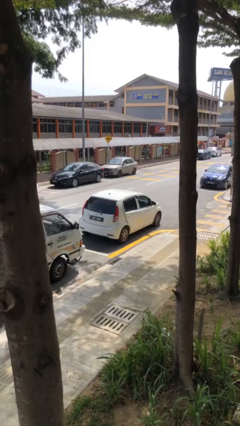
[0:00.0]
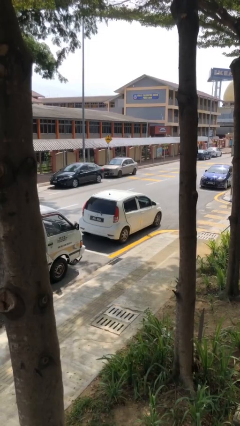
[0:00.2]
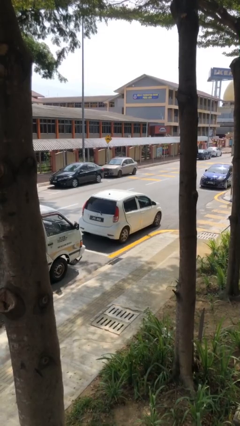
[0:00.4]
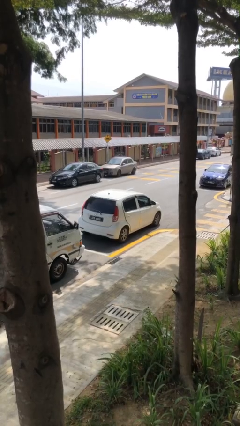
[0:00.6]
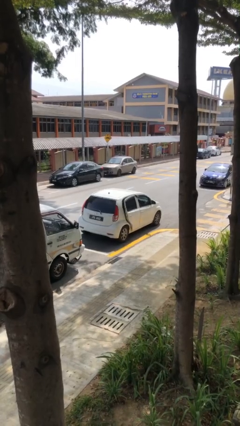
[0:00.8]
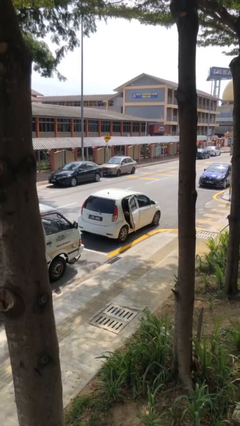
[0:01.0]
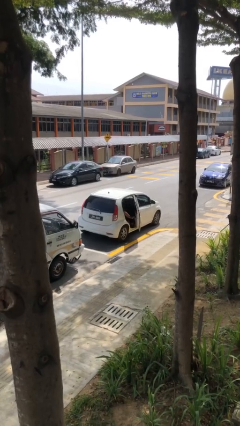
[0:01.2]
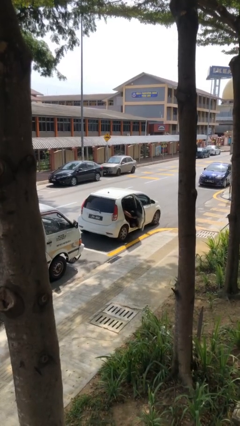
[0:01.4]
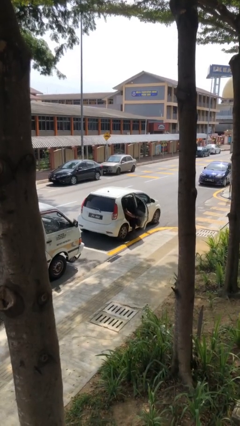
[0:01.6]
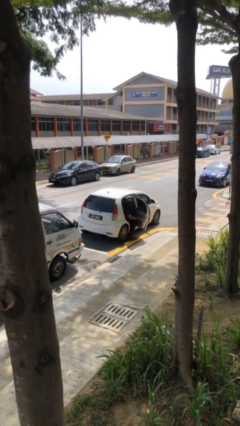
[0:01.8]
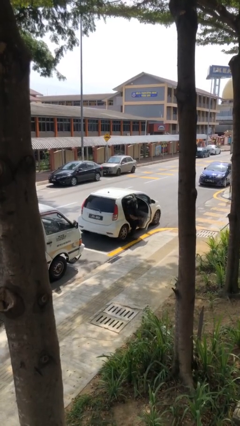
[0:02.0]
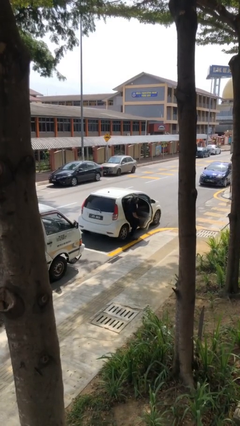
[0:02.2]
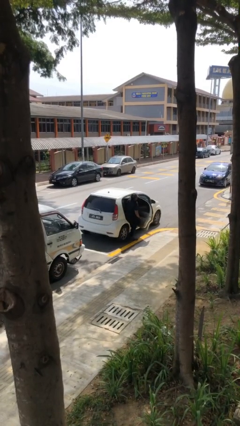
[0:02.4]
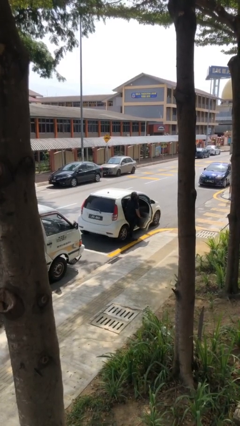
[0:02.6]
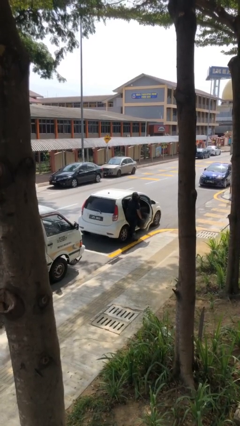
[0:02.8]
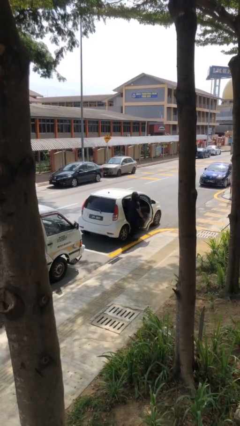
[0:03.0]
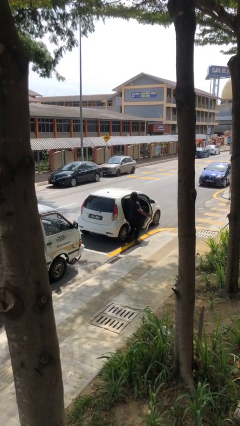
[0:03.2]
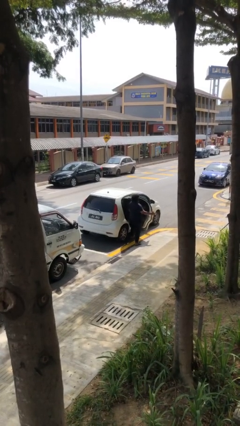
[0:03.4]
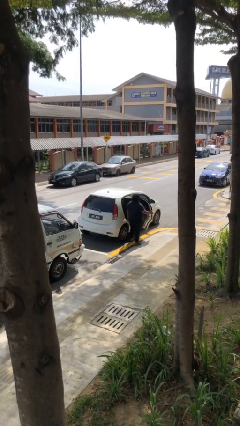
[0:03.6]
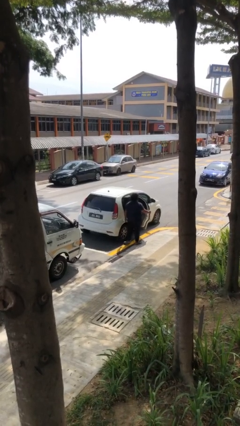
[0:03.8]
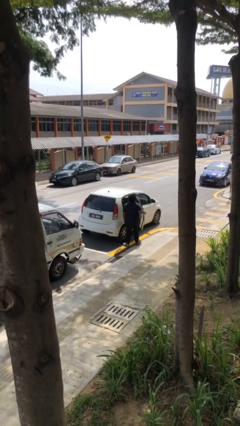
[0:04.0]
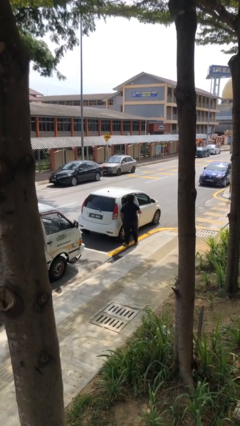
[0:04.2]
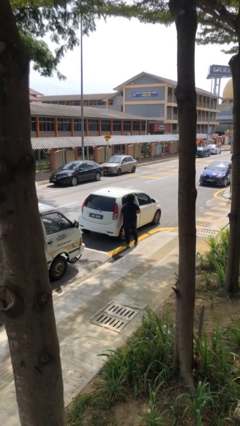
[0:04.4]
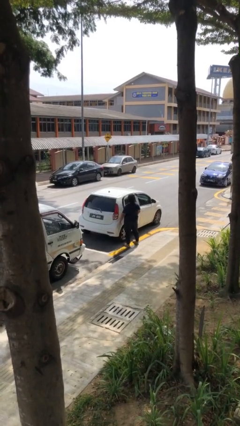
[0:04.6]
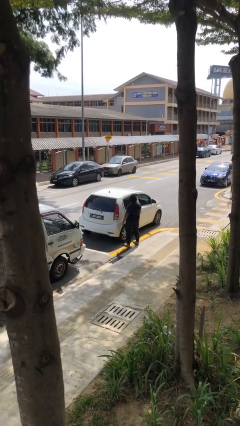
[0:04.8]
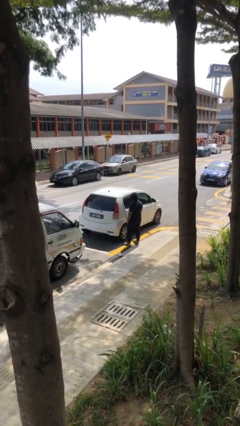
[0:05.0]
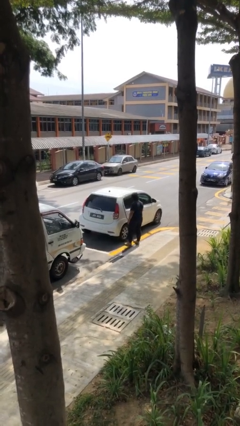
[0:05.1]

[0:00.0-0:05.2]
car drops off person

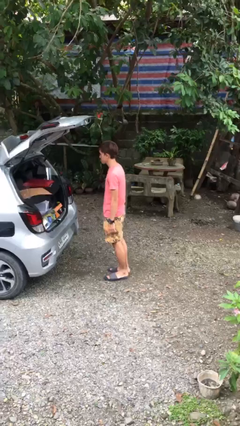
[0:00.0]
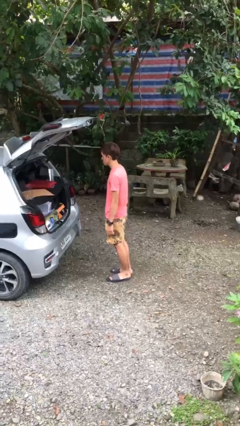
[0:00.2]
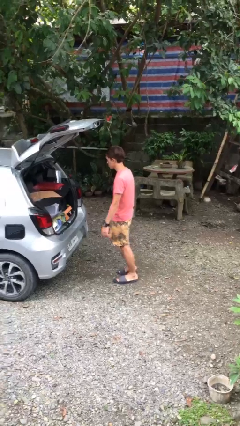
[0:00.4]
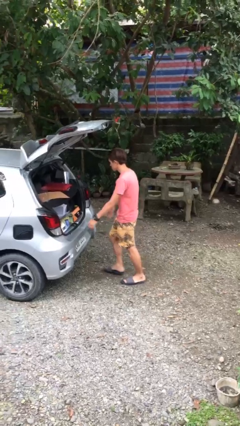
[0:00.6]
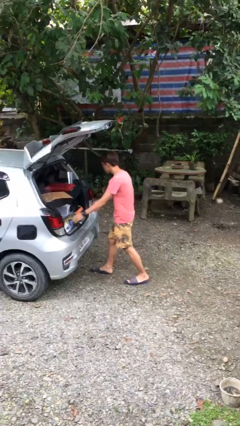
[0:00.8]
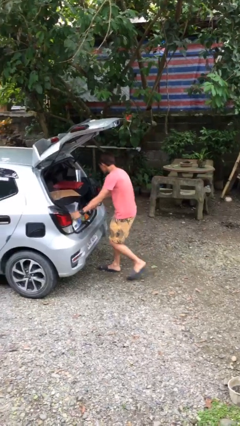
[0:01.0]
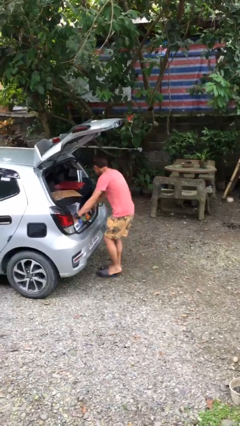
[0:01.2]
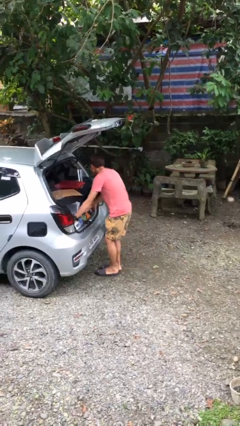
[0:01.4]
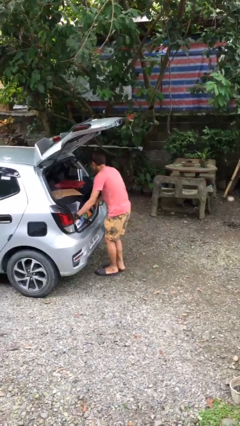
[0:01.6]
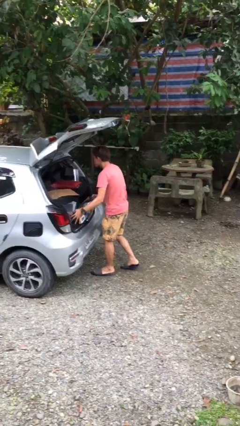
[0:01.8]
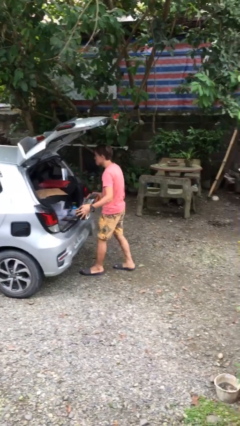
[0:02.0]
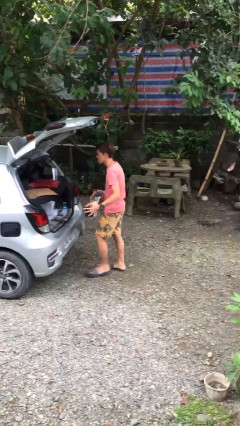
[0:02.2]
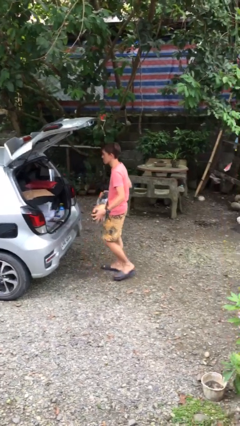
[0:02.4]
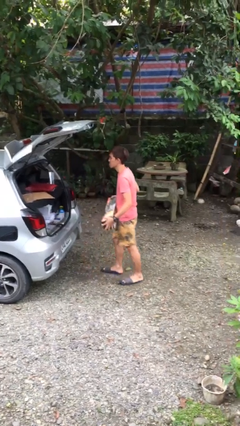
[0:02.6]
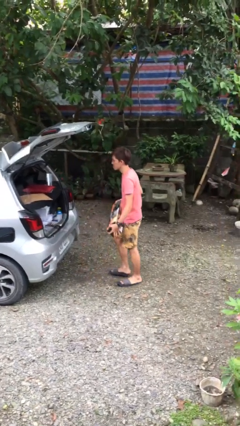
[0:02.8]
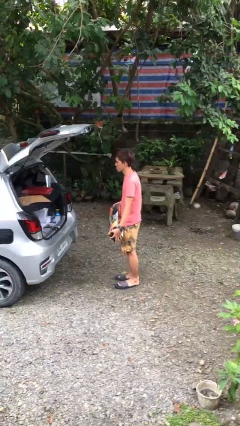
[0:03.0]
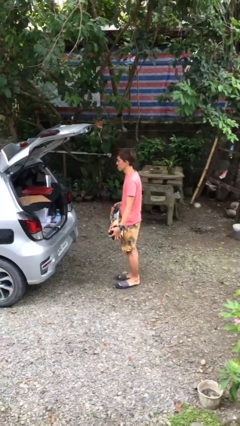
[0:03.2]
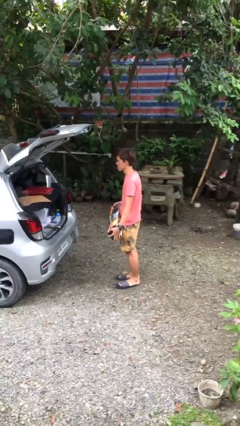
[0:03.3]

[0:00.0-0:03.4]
person unloads car

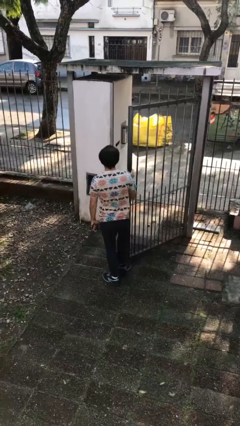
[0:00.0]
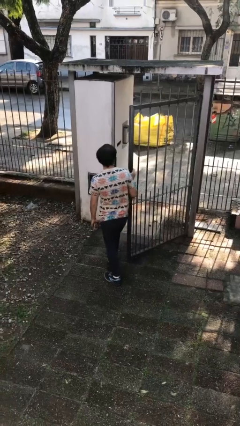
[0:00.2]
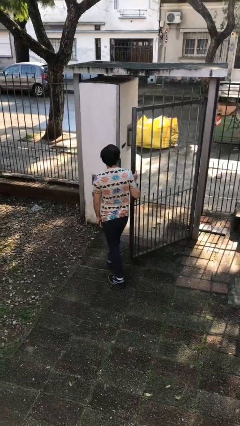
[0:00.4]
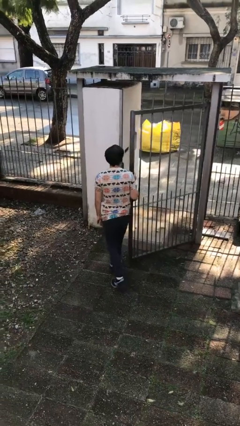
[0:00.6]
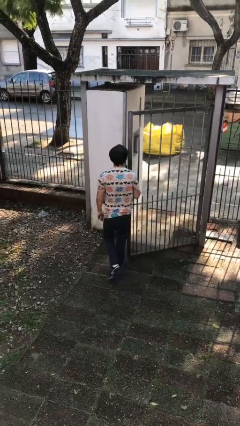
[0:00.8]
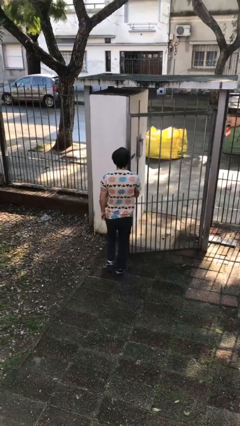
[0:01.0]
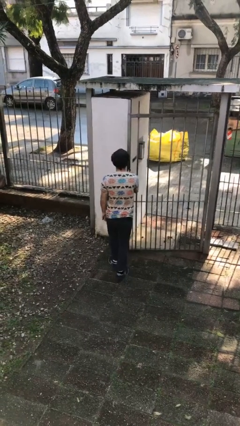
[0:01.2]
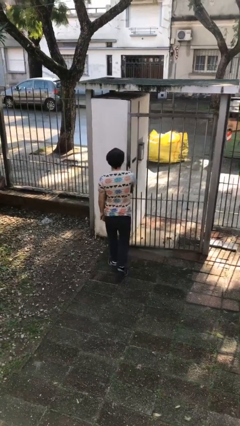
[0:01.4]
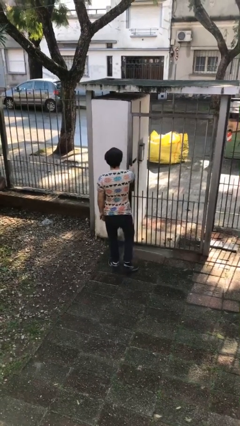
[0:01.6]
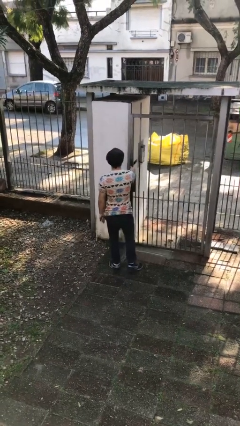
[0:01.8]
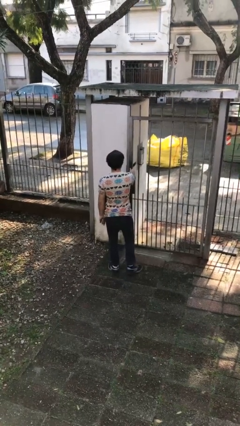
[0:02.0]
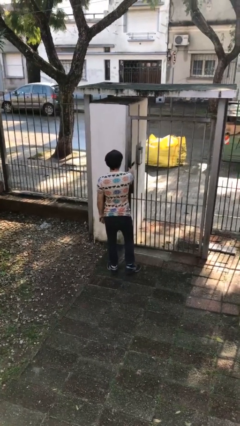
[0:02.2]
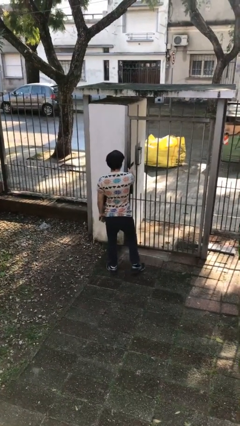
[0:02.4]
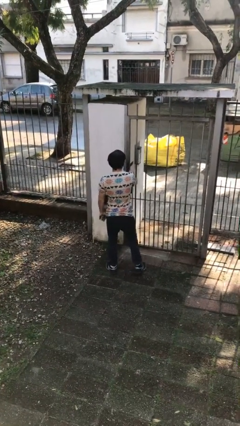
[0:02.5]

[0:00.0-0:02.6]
person closes gate

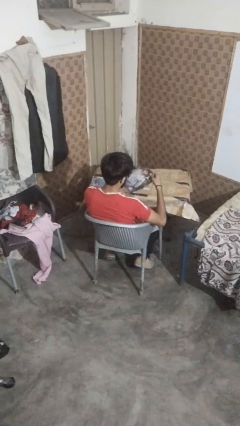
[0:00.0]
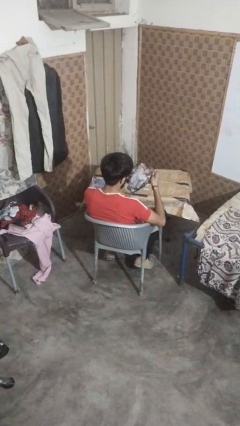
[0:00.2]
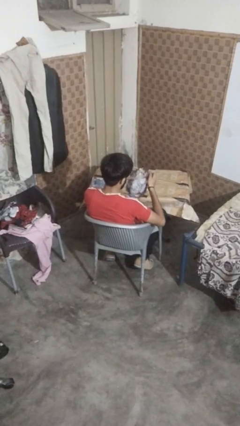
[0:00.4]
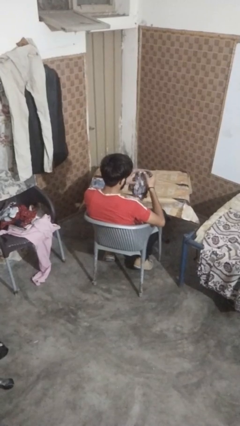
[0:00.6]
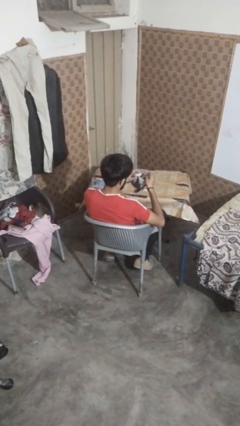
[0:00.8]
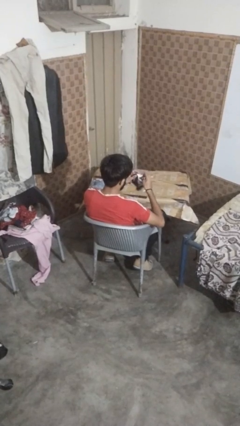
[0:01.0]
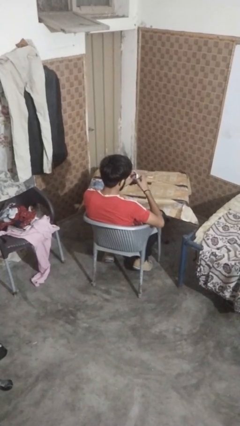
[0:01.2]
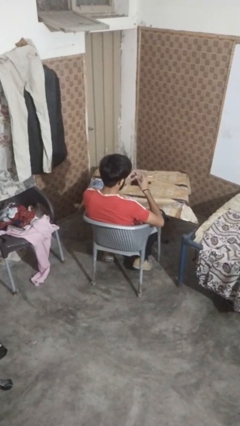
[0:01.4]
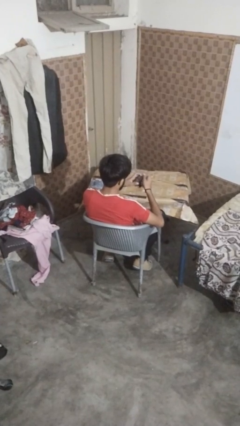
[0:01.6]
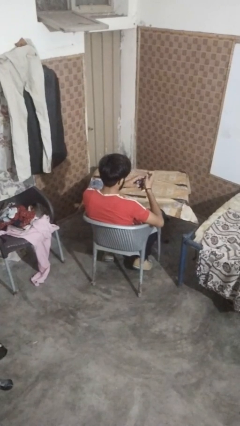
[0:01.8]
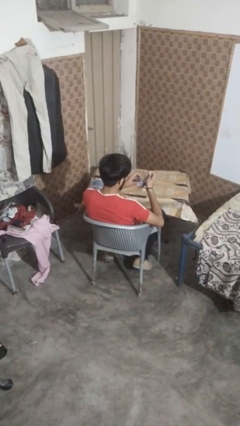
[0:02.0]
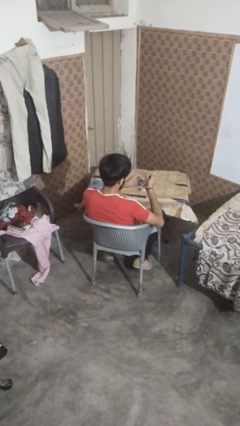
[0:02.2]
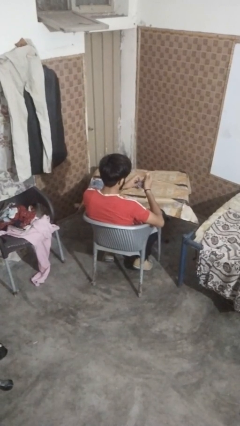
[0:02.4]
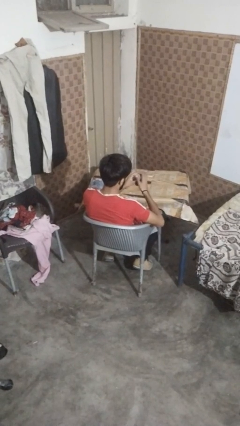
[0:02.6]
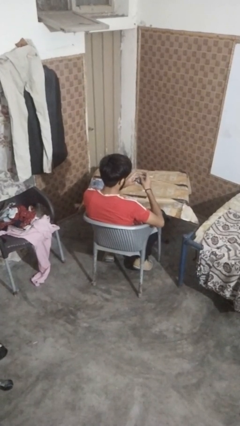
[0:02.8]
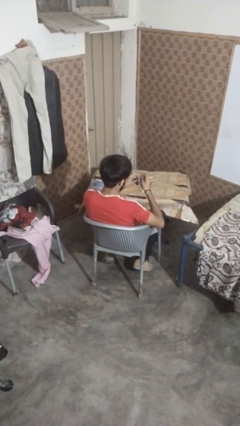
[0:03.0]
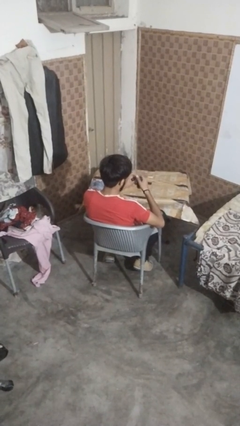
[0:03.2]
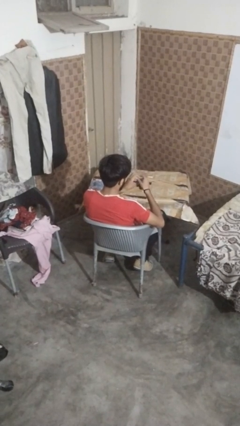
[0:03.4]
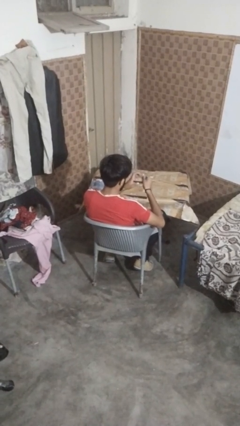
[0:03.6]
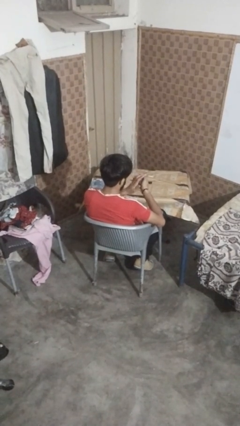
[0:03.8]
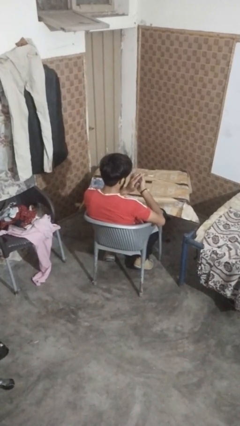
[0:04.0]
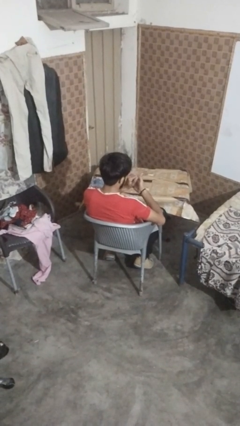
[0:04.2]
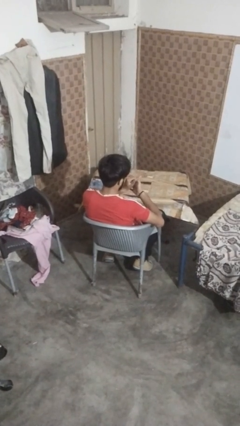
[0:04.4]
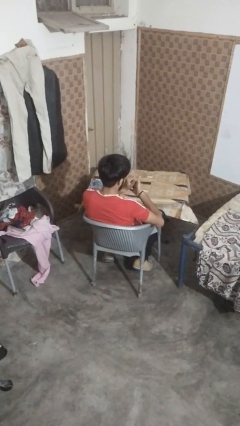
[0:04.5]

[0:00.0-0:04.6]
person crumples paper

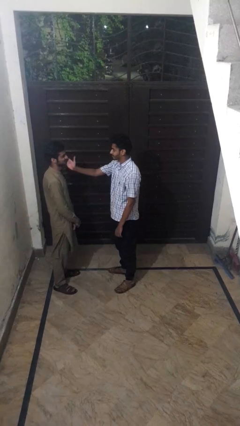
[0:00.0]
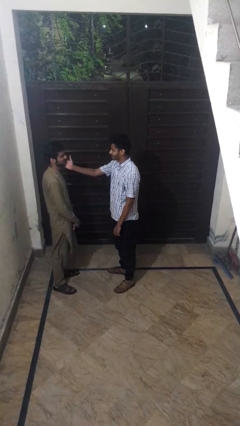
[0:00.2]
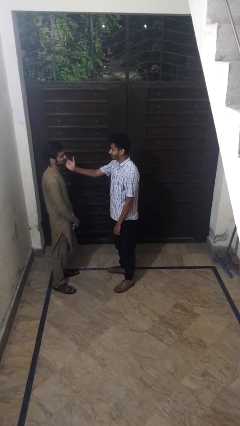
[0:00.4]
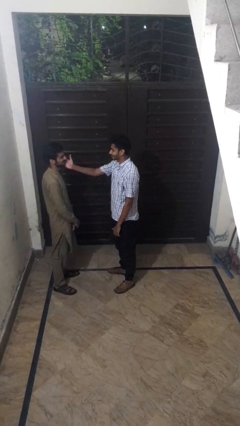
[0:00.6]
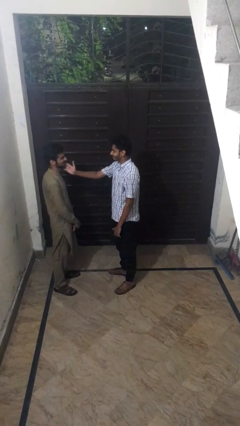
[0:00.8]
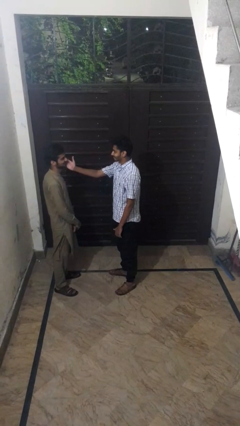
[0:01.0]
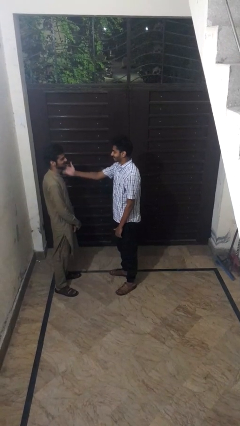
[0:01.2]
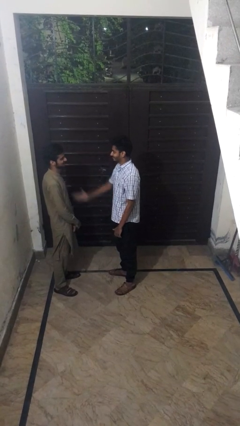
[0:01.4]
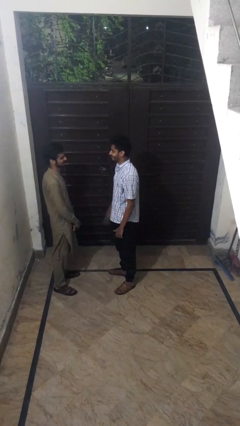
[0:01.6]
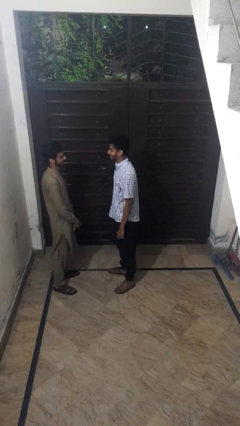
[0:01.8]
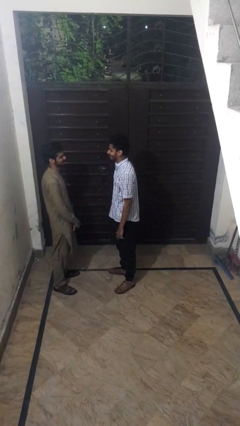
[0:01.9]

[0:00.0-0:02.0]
person touches face of person
